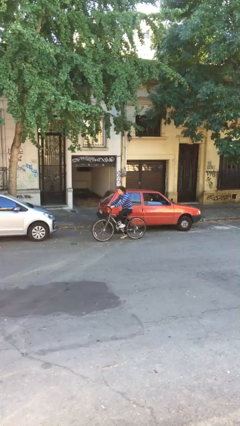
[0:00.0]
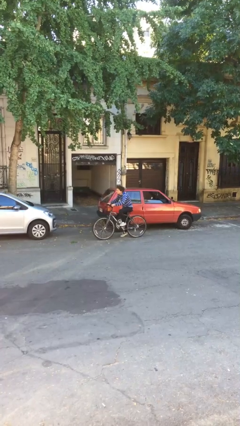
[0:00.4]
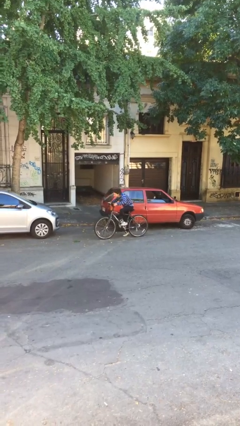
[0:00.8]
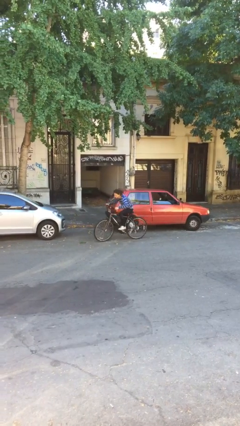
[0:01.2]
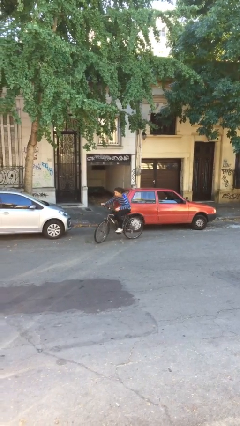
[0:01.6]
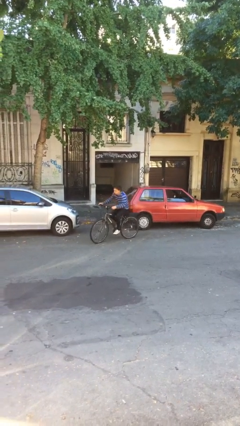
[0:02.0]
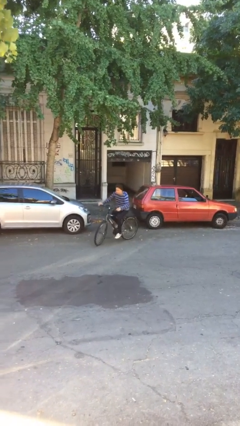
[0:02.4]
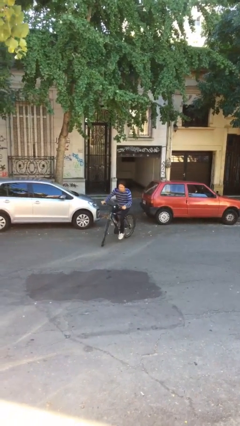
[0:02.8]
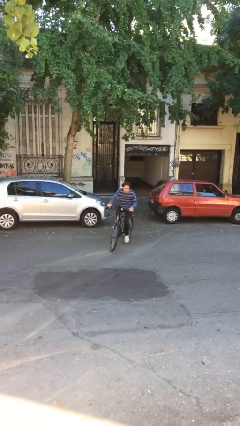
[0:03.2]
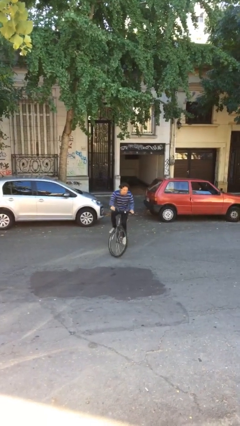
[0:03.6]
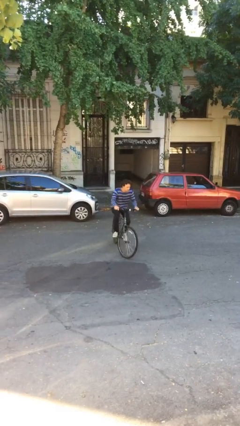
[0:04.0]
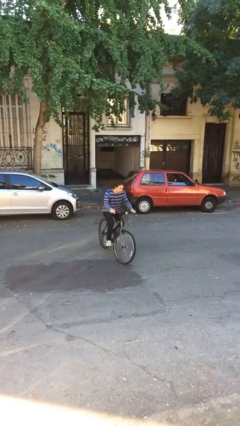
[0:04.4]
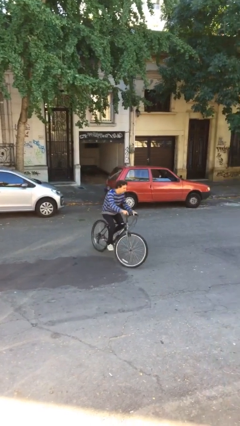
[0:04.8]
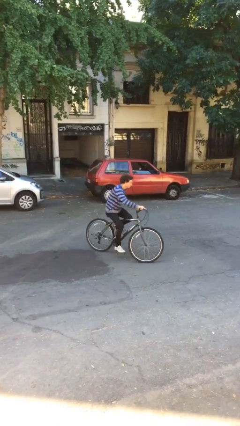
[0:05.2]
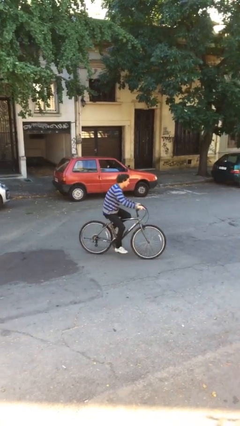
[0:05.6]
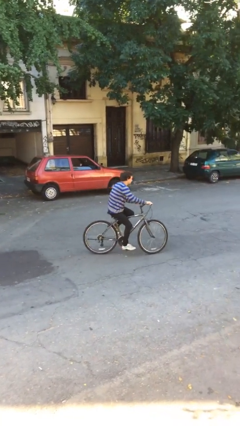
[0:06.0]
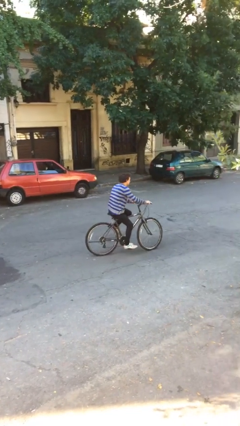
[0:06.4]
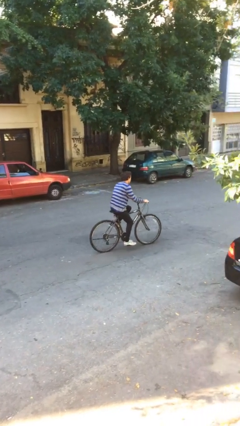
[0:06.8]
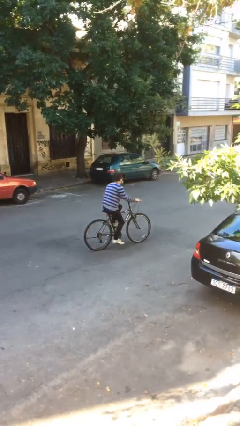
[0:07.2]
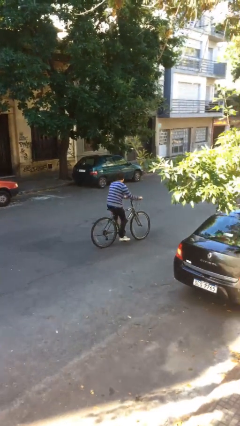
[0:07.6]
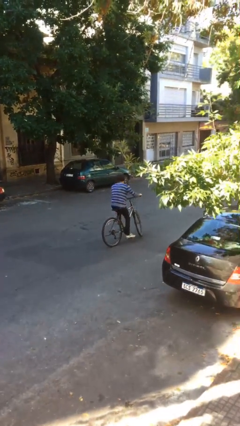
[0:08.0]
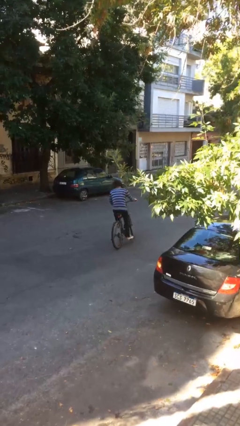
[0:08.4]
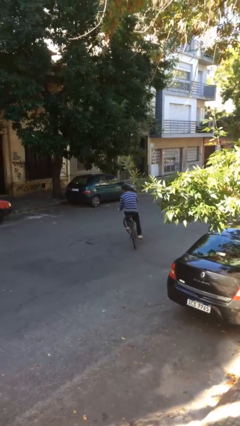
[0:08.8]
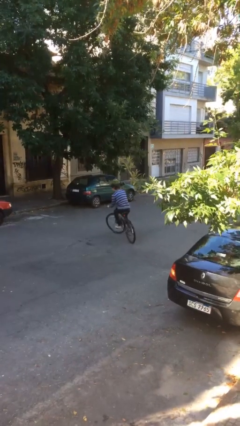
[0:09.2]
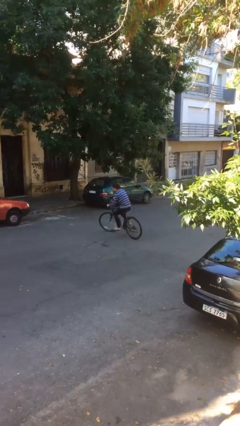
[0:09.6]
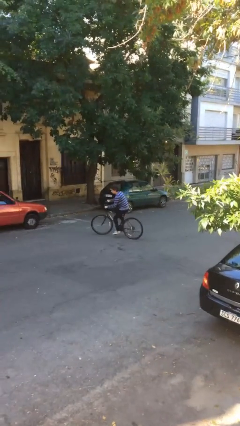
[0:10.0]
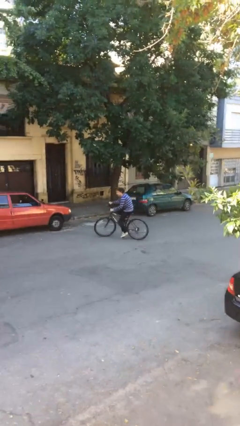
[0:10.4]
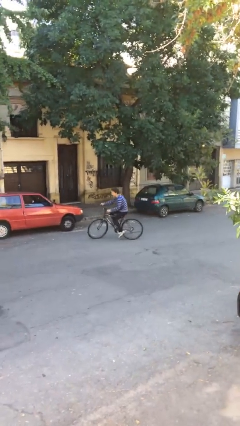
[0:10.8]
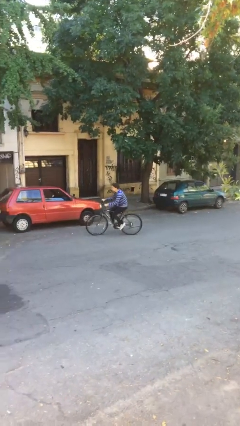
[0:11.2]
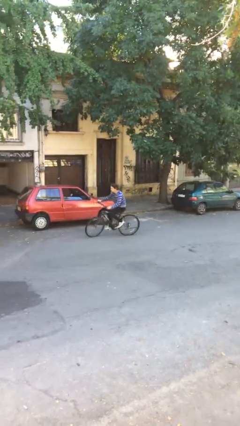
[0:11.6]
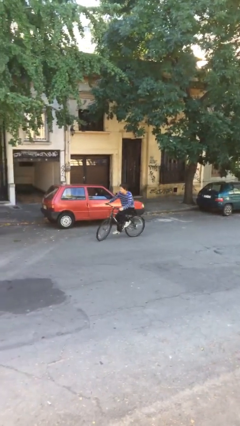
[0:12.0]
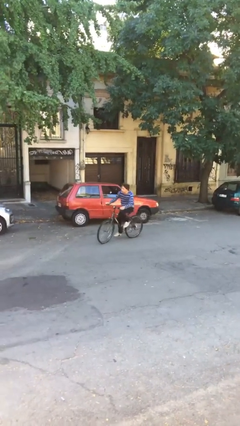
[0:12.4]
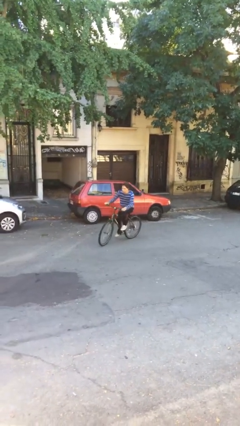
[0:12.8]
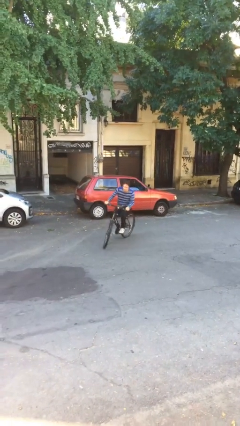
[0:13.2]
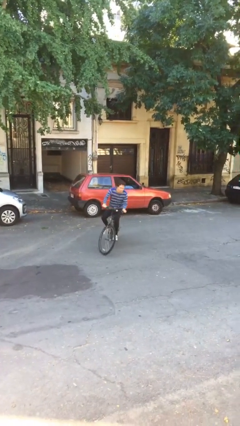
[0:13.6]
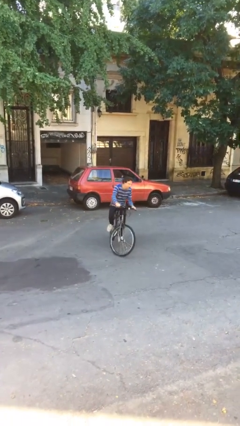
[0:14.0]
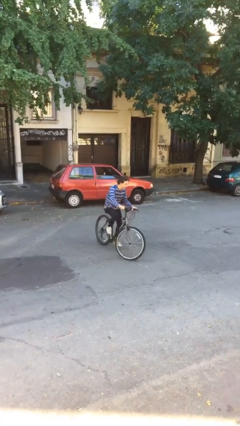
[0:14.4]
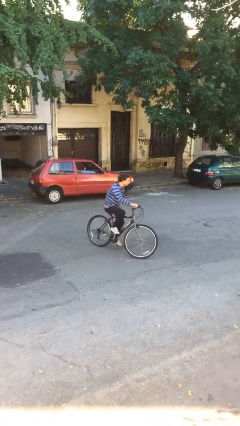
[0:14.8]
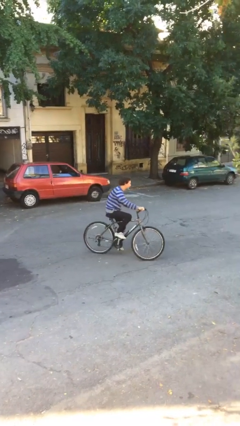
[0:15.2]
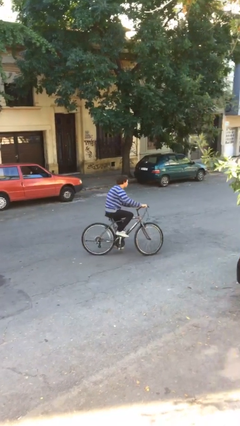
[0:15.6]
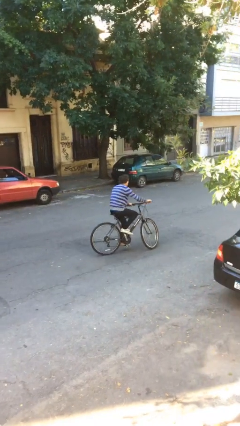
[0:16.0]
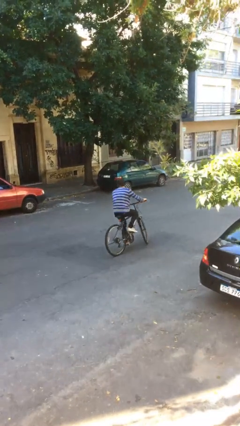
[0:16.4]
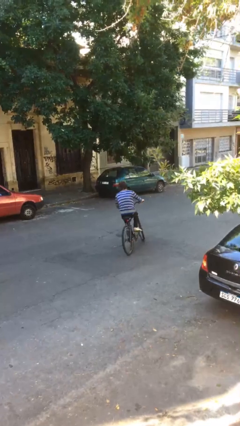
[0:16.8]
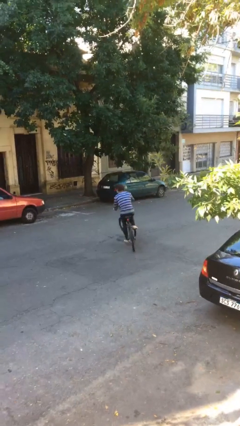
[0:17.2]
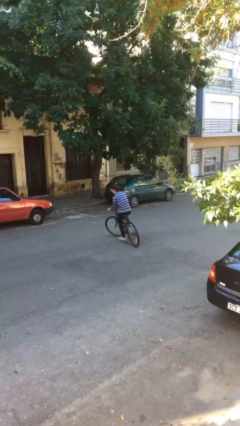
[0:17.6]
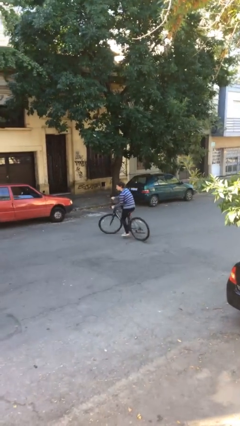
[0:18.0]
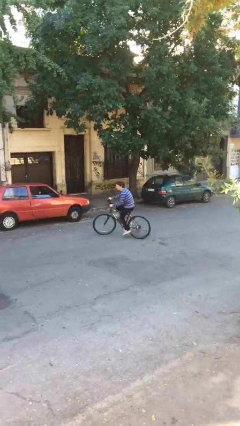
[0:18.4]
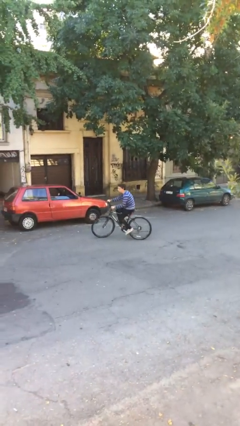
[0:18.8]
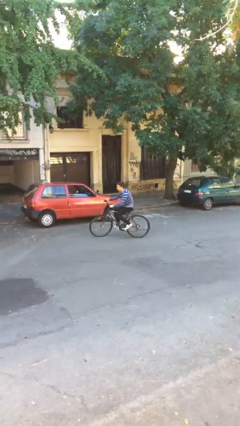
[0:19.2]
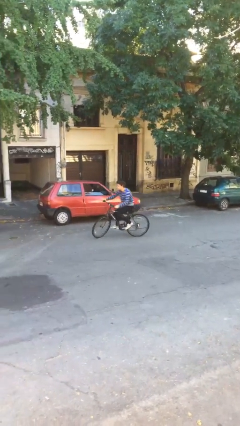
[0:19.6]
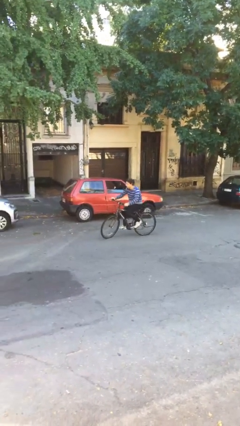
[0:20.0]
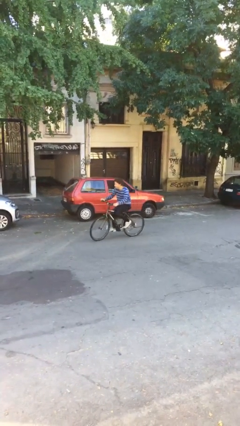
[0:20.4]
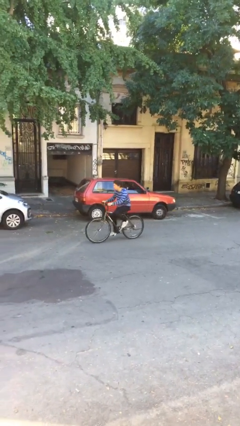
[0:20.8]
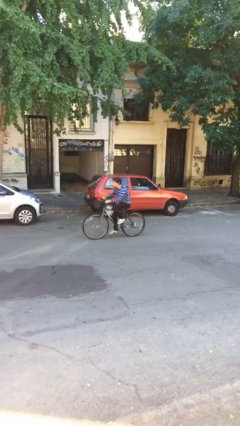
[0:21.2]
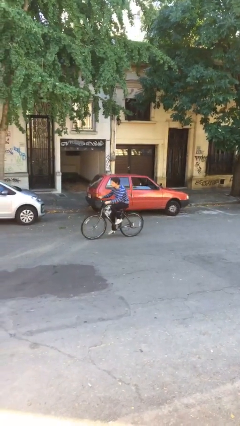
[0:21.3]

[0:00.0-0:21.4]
person rides bicycle

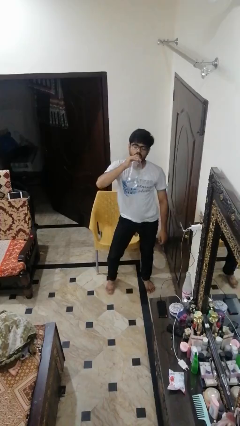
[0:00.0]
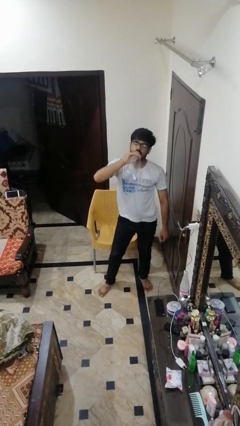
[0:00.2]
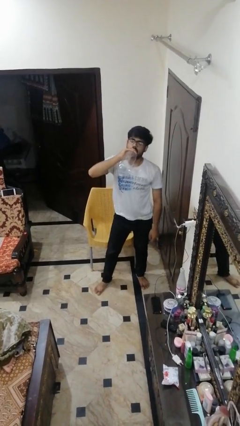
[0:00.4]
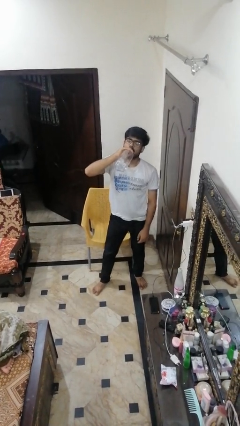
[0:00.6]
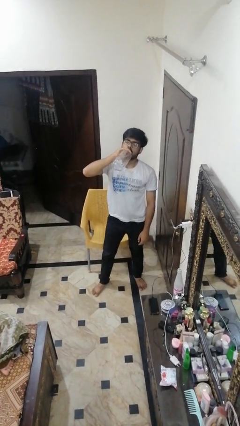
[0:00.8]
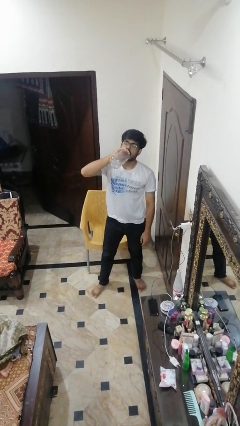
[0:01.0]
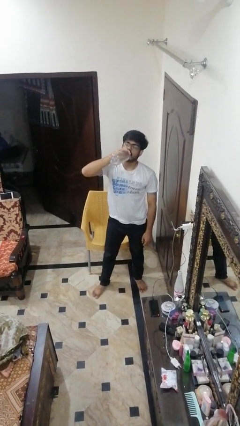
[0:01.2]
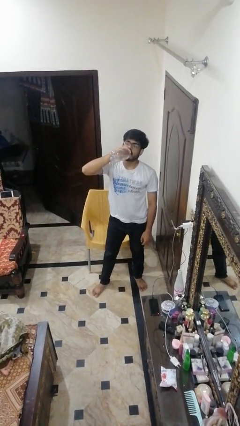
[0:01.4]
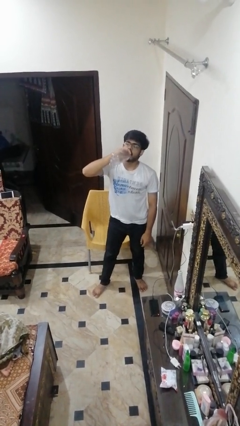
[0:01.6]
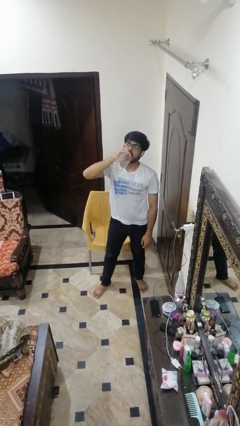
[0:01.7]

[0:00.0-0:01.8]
person drops object

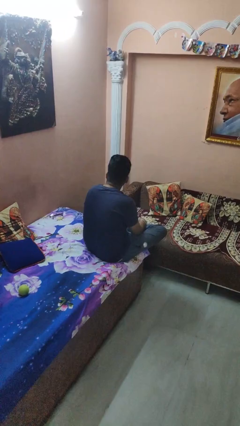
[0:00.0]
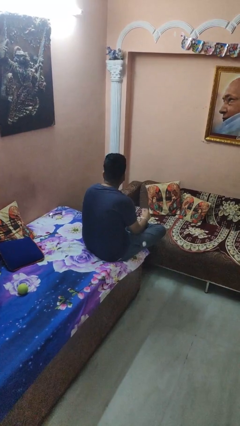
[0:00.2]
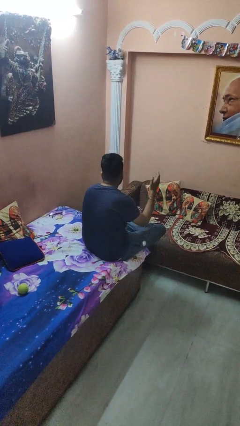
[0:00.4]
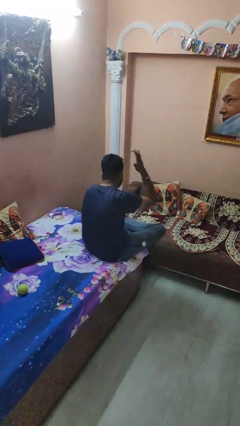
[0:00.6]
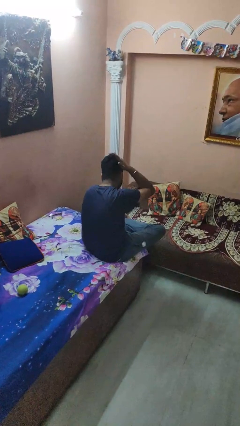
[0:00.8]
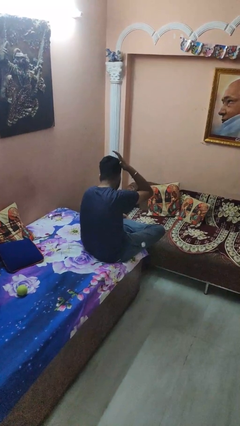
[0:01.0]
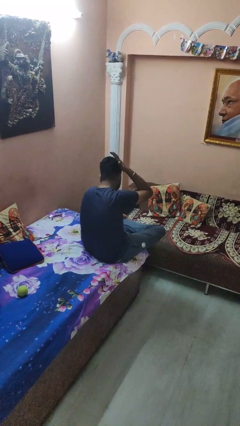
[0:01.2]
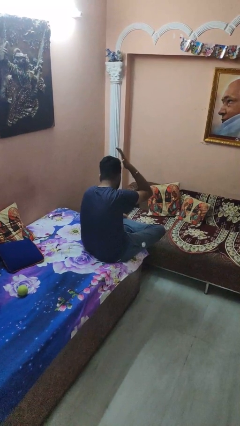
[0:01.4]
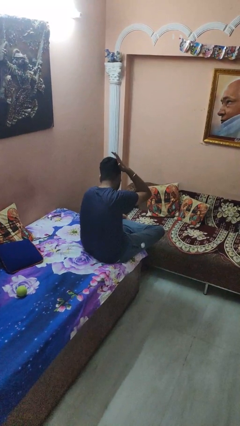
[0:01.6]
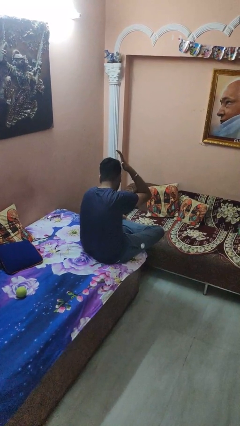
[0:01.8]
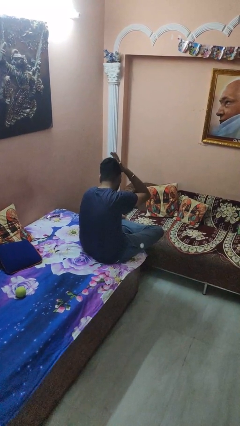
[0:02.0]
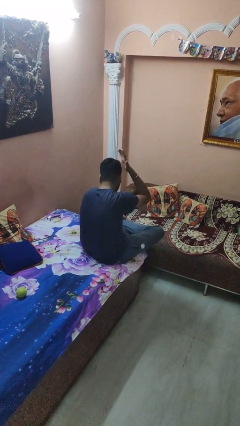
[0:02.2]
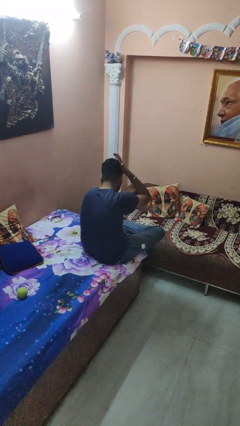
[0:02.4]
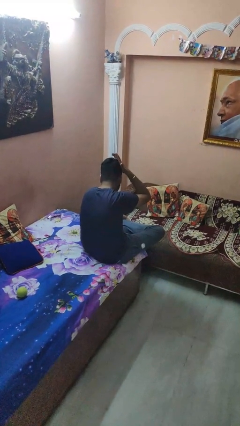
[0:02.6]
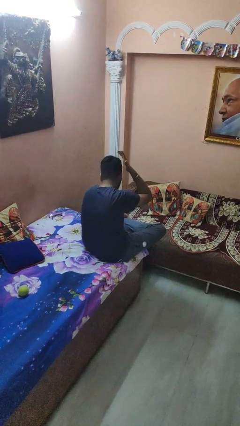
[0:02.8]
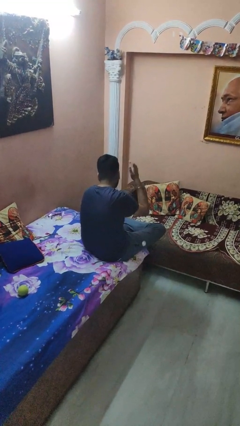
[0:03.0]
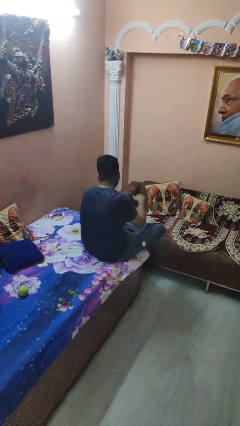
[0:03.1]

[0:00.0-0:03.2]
person pats head

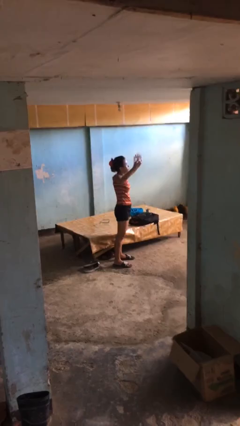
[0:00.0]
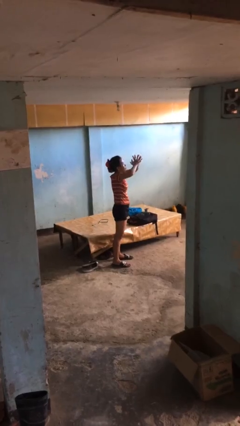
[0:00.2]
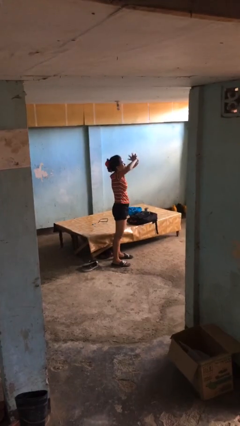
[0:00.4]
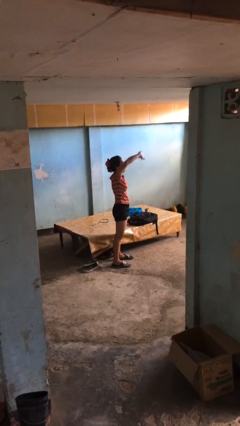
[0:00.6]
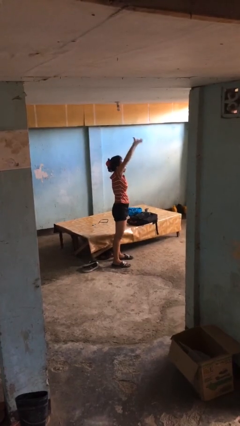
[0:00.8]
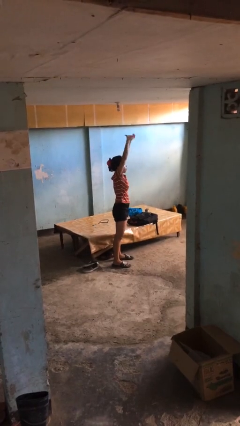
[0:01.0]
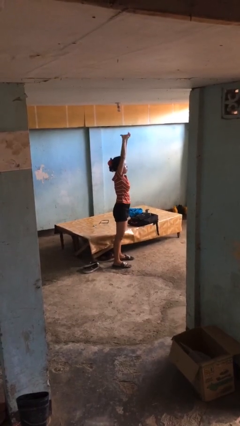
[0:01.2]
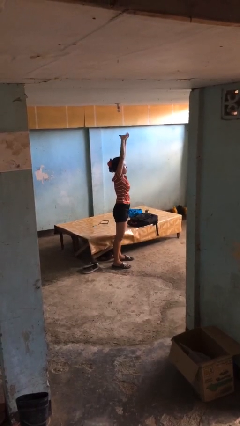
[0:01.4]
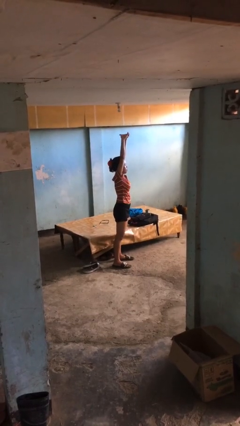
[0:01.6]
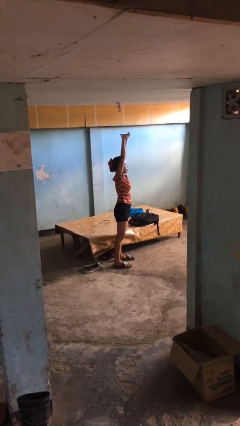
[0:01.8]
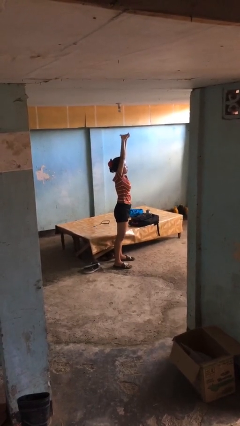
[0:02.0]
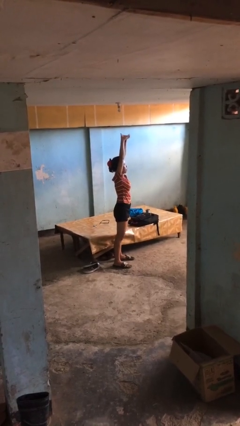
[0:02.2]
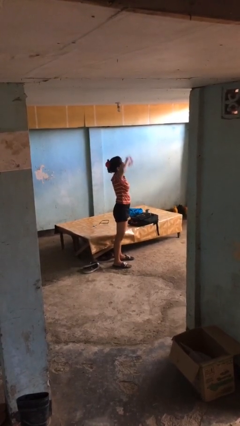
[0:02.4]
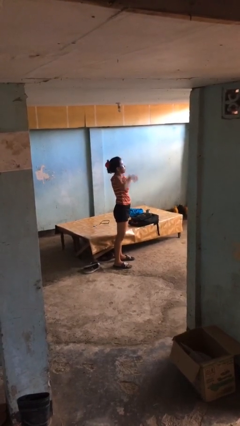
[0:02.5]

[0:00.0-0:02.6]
person stretches arms over head
